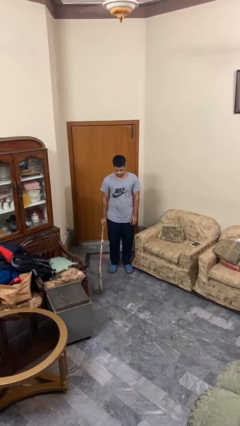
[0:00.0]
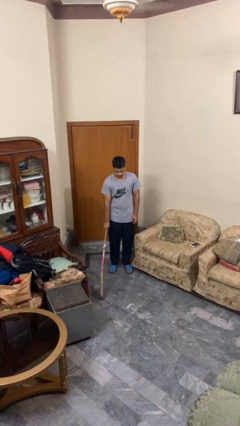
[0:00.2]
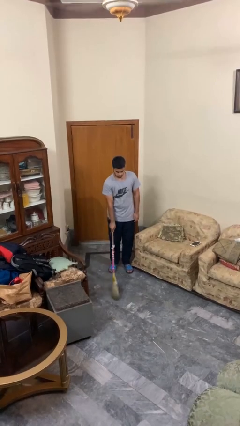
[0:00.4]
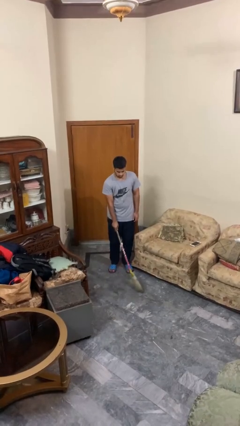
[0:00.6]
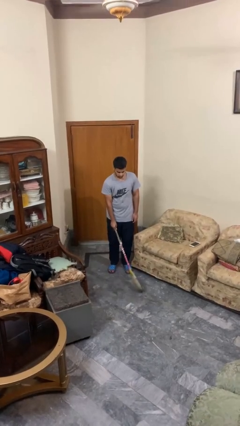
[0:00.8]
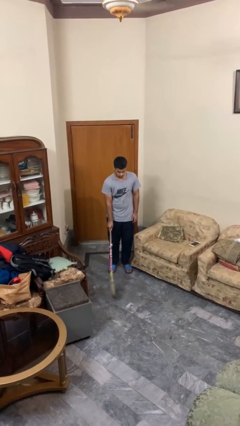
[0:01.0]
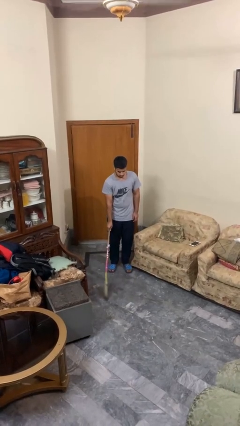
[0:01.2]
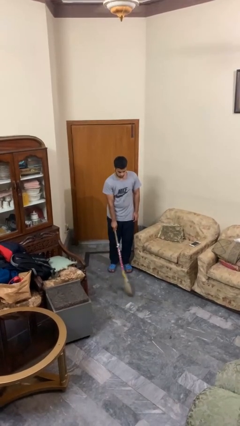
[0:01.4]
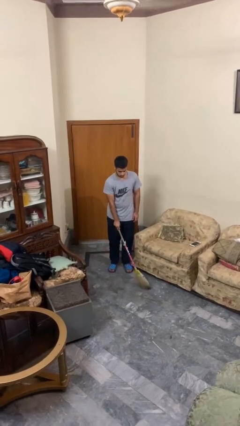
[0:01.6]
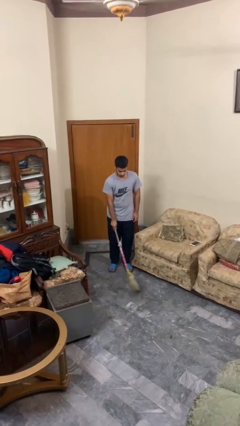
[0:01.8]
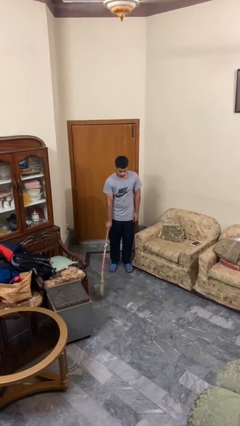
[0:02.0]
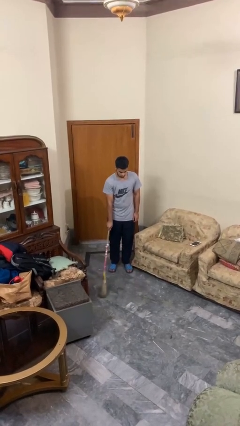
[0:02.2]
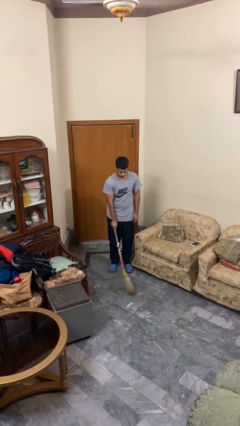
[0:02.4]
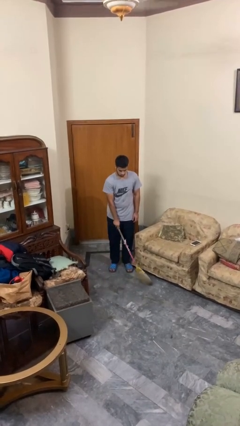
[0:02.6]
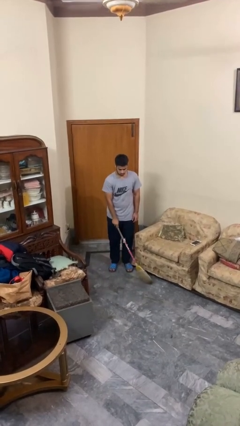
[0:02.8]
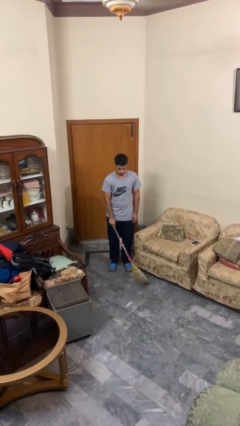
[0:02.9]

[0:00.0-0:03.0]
person sweeps floor

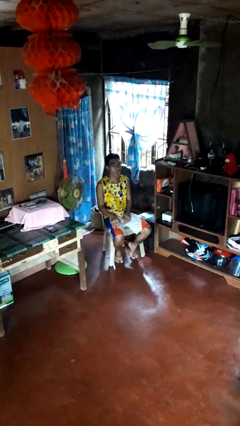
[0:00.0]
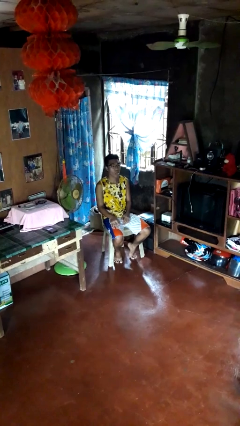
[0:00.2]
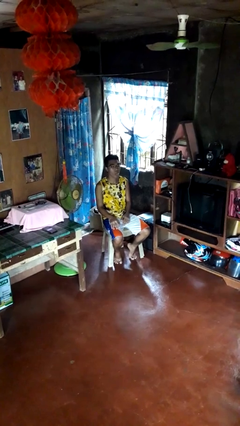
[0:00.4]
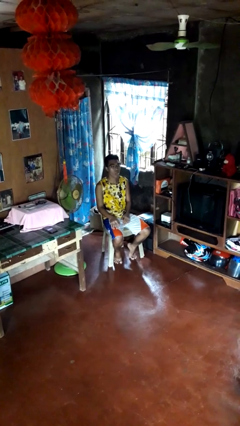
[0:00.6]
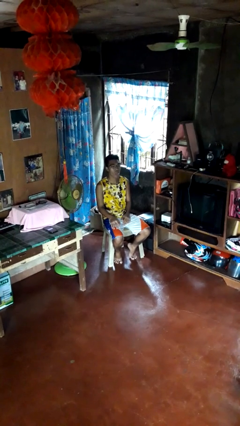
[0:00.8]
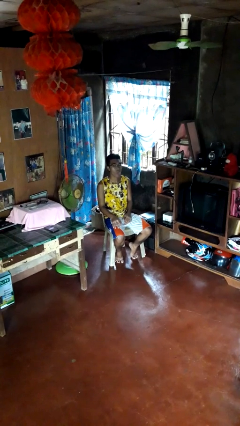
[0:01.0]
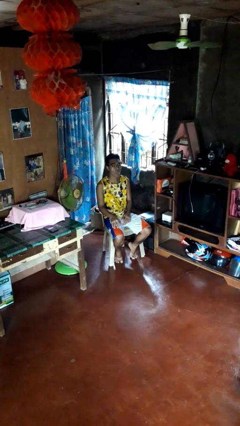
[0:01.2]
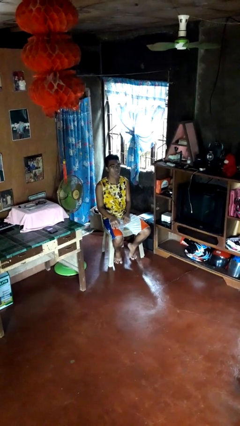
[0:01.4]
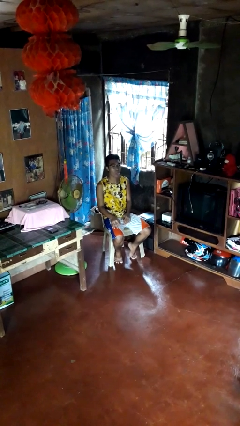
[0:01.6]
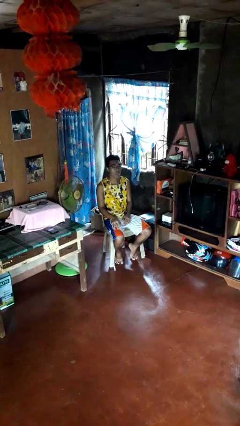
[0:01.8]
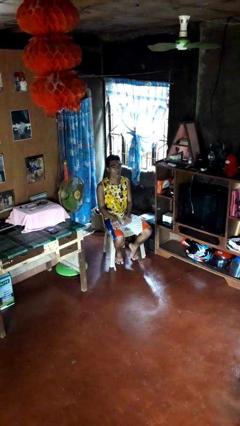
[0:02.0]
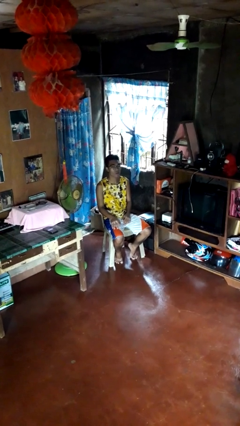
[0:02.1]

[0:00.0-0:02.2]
person sticks out tongue

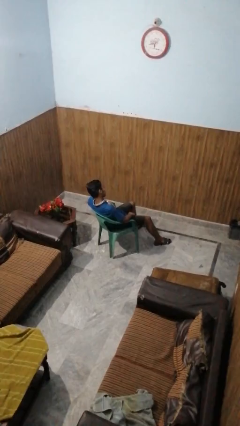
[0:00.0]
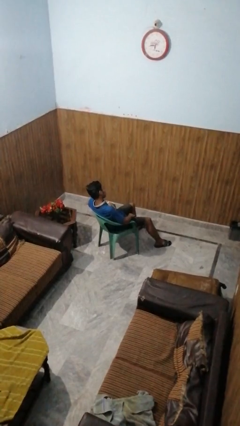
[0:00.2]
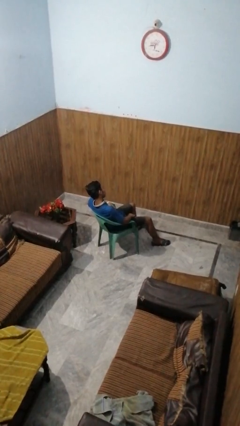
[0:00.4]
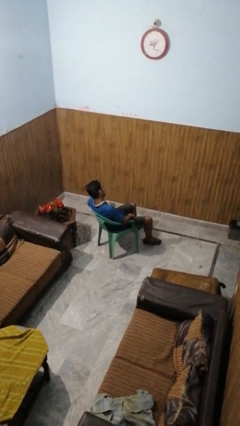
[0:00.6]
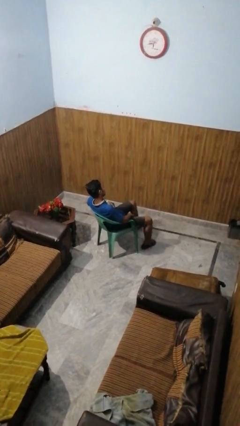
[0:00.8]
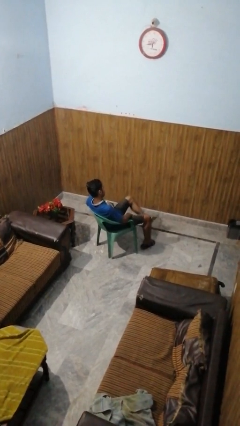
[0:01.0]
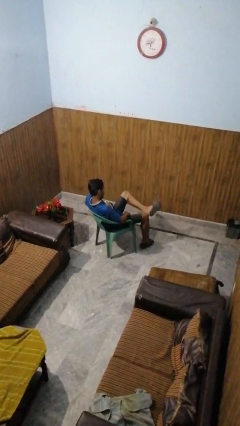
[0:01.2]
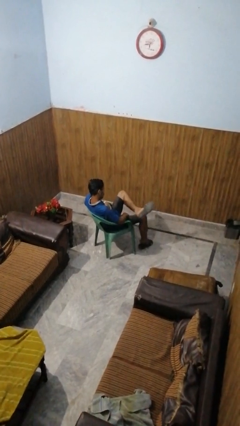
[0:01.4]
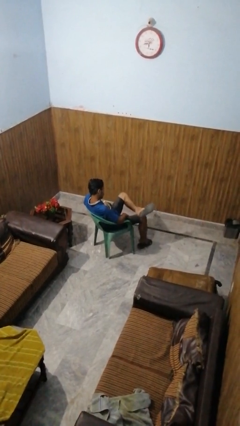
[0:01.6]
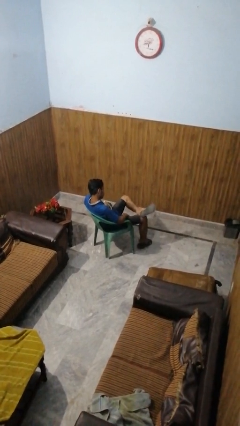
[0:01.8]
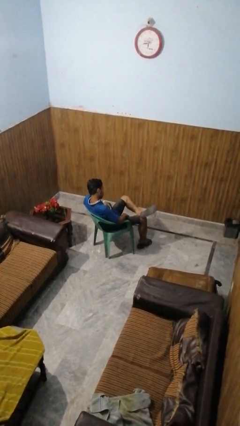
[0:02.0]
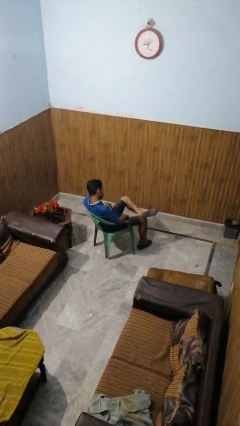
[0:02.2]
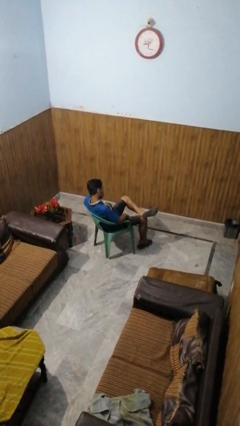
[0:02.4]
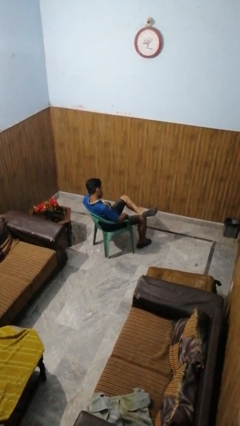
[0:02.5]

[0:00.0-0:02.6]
person crosses legs

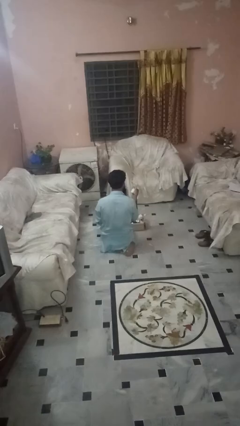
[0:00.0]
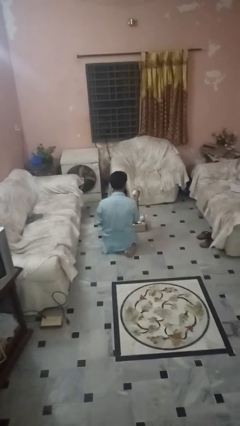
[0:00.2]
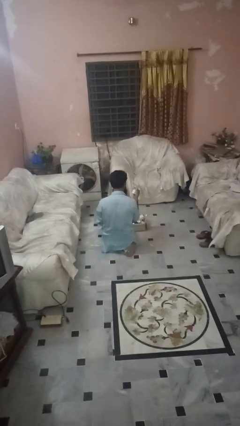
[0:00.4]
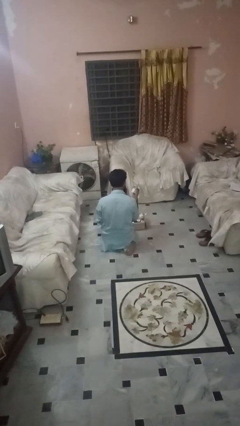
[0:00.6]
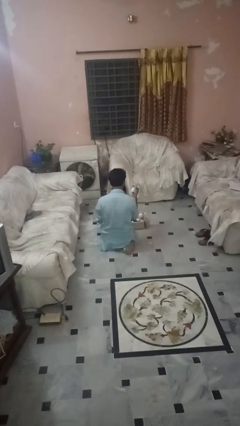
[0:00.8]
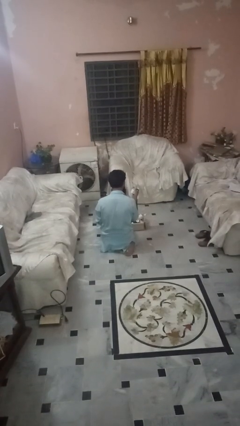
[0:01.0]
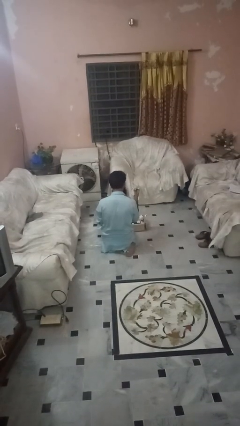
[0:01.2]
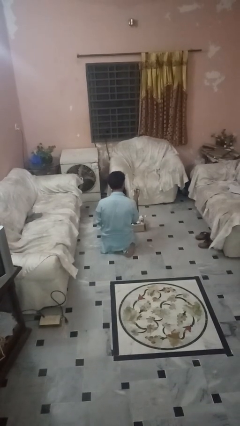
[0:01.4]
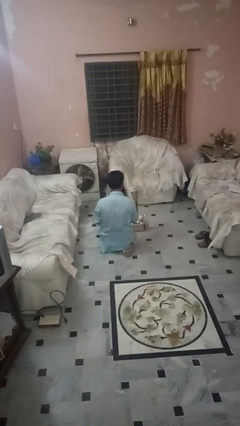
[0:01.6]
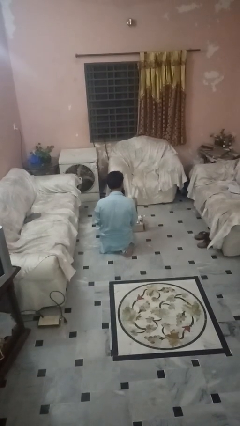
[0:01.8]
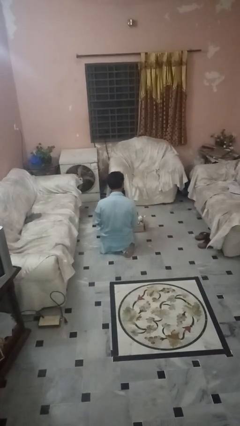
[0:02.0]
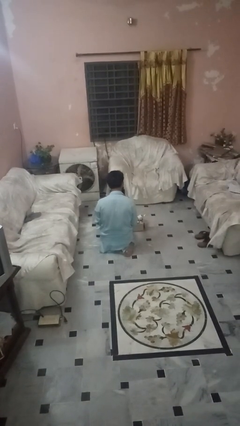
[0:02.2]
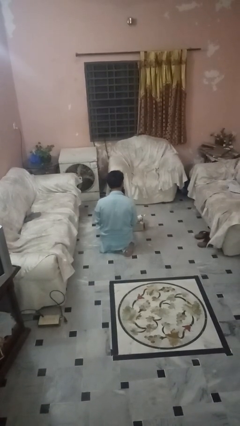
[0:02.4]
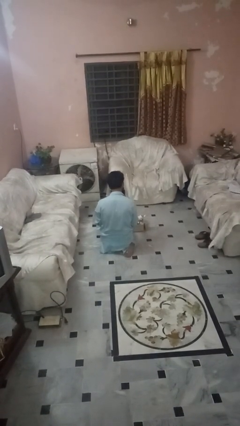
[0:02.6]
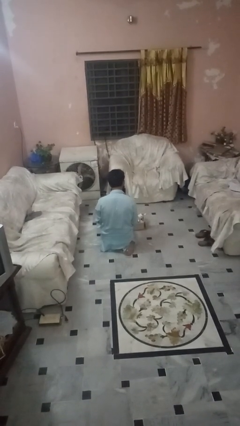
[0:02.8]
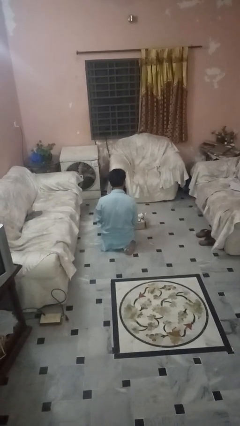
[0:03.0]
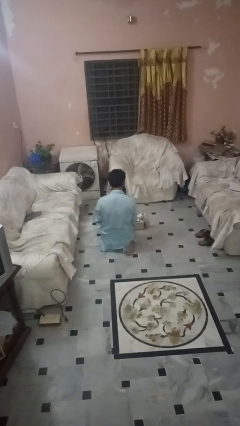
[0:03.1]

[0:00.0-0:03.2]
person puts object into box

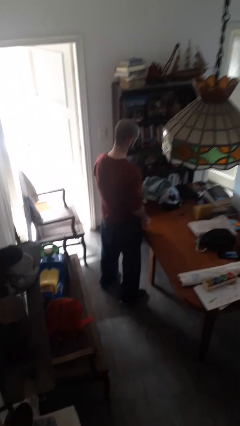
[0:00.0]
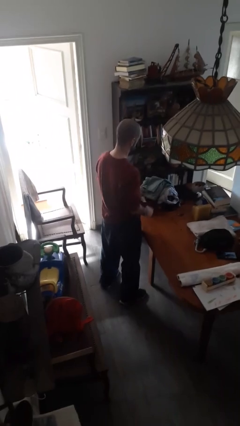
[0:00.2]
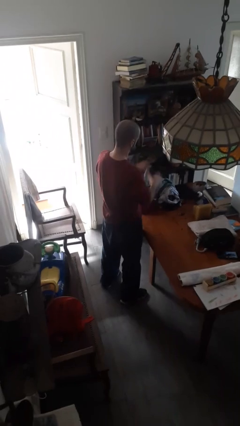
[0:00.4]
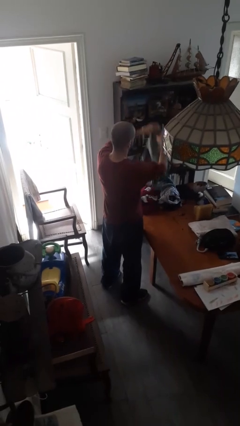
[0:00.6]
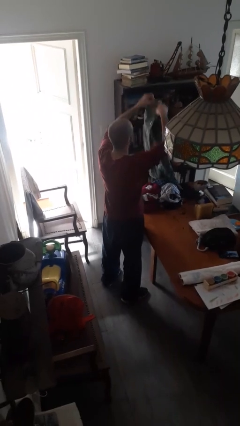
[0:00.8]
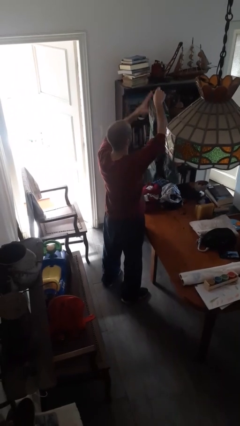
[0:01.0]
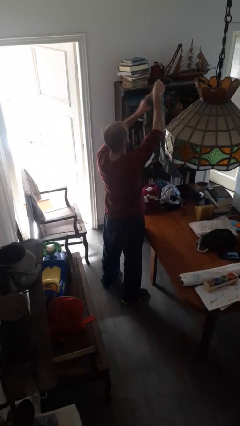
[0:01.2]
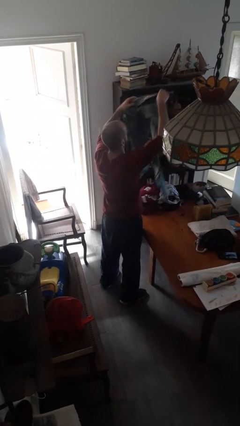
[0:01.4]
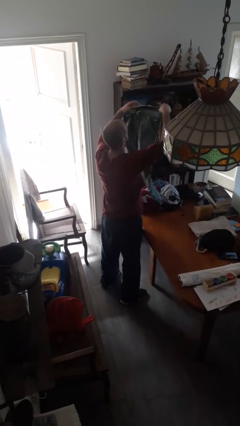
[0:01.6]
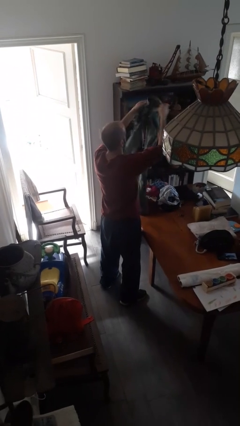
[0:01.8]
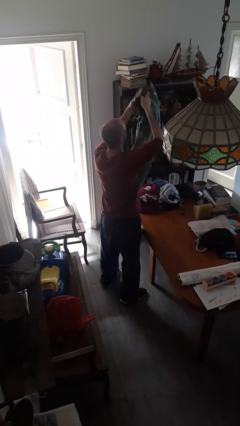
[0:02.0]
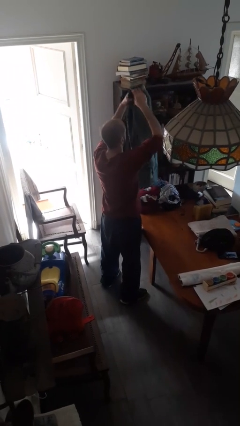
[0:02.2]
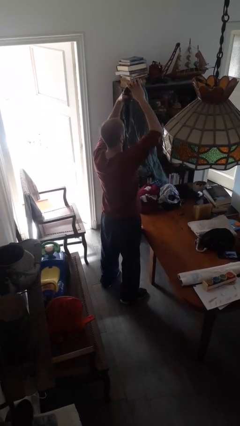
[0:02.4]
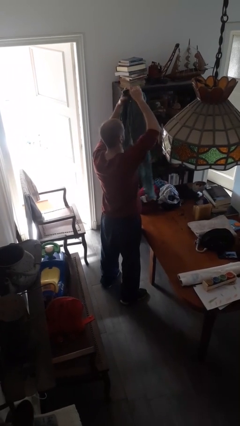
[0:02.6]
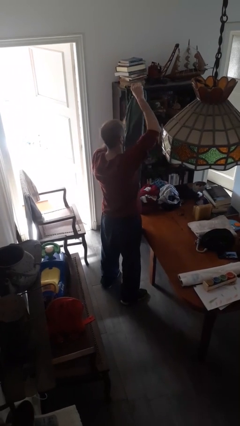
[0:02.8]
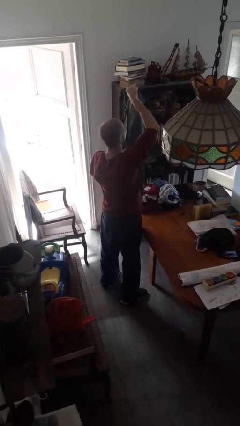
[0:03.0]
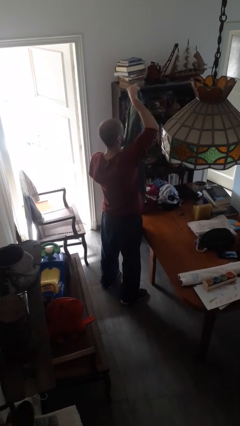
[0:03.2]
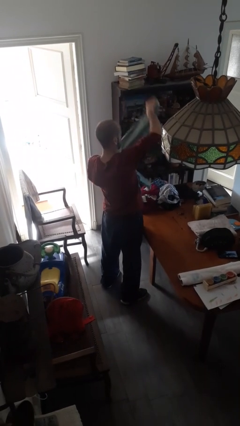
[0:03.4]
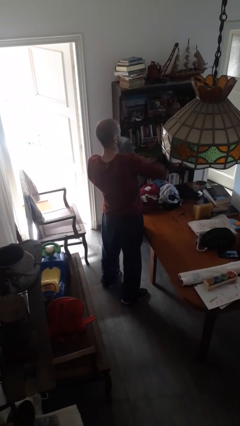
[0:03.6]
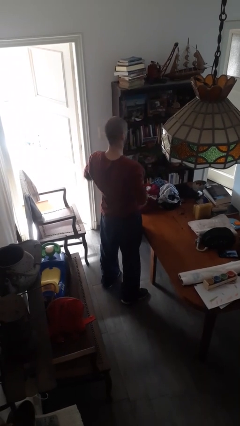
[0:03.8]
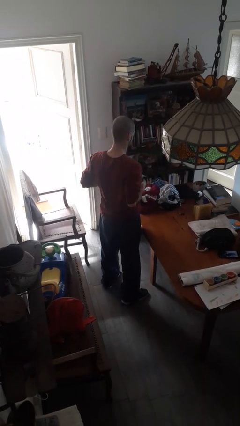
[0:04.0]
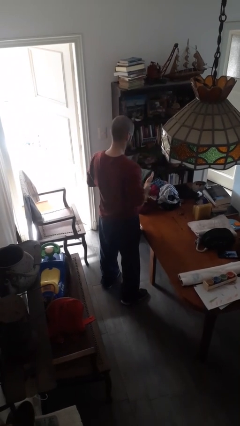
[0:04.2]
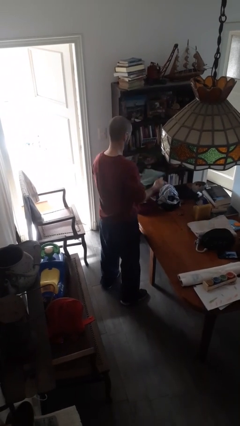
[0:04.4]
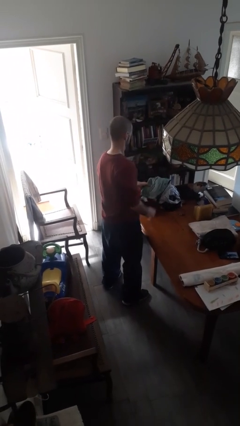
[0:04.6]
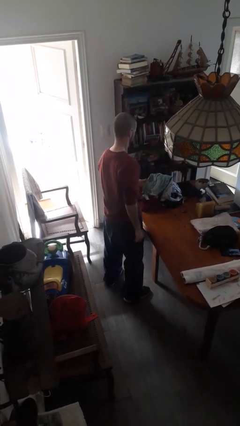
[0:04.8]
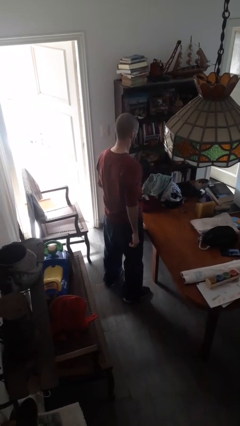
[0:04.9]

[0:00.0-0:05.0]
person folds pants

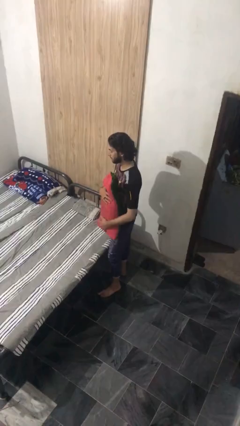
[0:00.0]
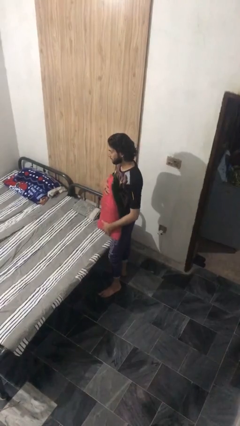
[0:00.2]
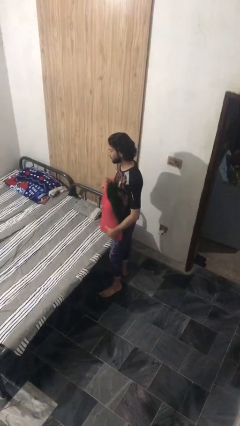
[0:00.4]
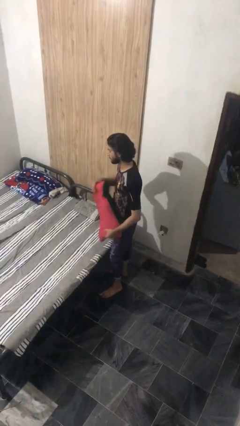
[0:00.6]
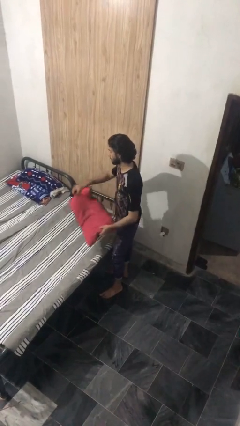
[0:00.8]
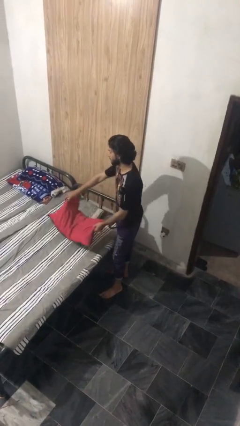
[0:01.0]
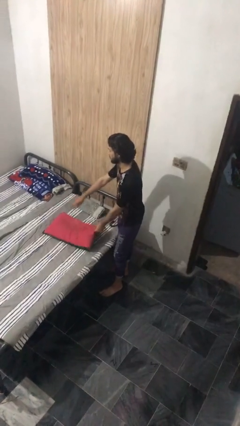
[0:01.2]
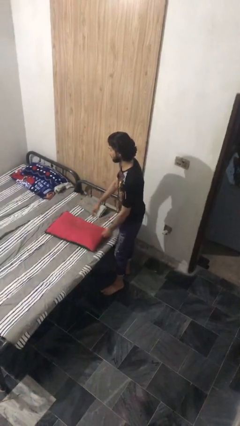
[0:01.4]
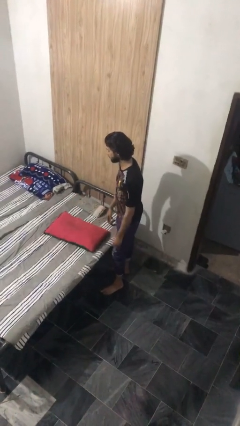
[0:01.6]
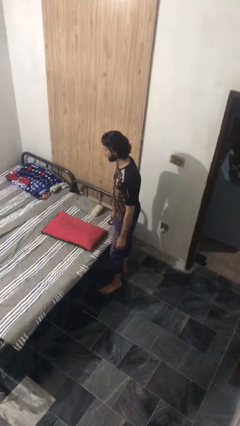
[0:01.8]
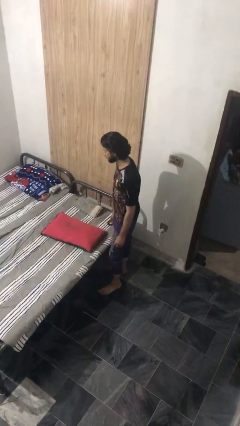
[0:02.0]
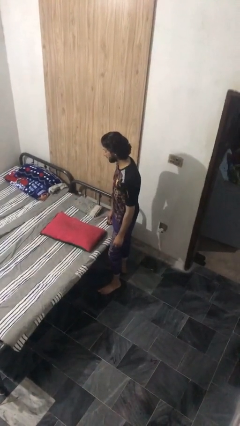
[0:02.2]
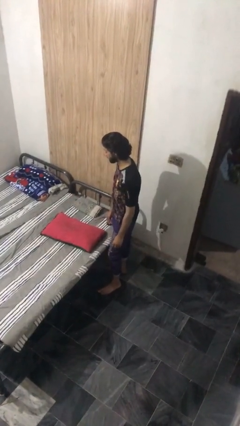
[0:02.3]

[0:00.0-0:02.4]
person puts down object on bed
